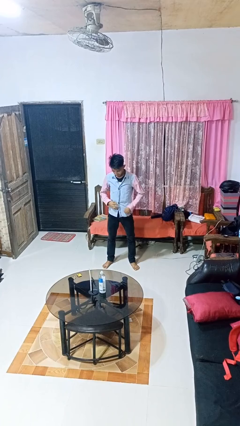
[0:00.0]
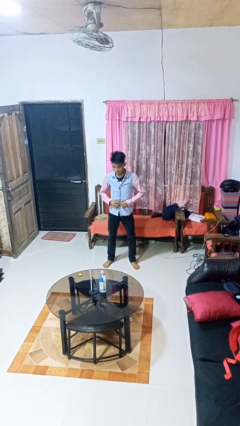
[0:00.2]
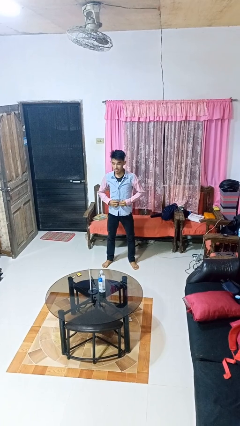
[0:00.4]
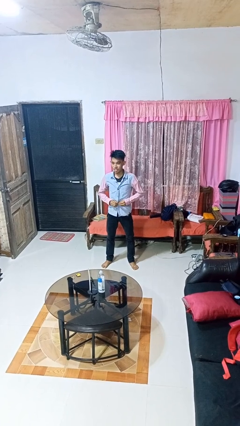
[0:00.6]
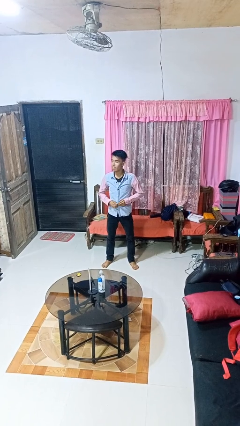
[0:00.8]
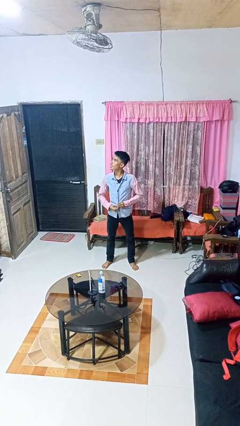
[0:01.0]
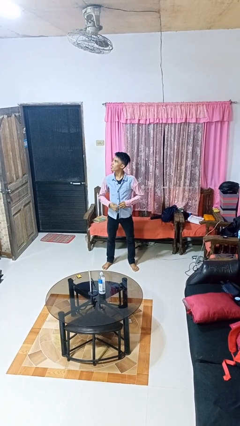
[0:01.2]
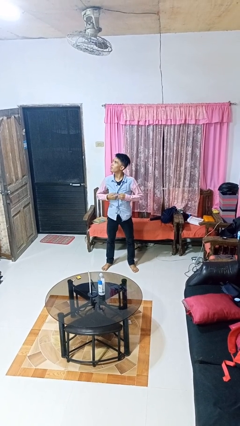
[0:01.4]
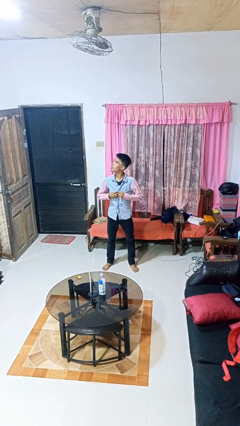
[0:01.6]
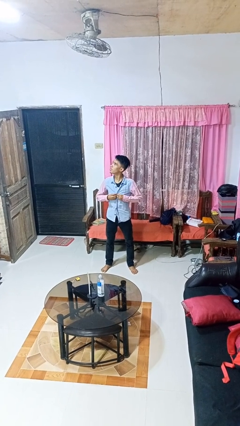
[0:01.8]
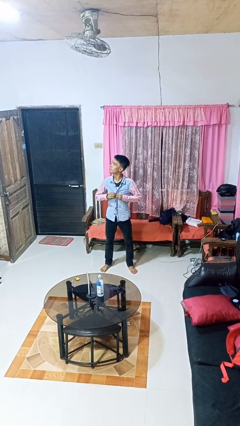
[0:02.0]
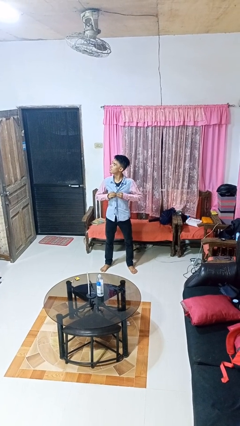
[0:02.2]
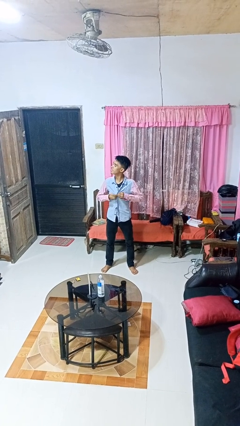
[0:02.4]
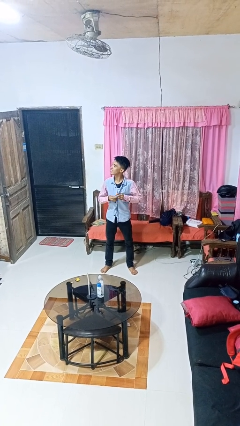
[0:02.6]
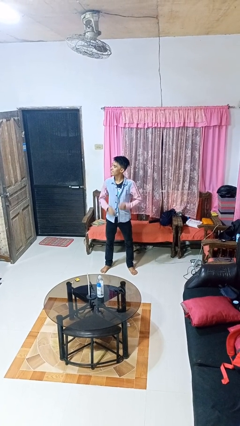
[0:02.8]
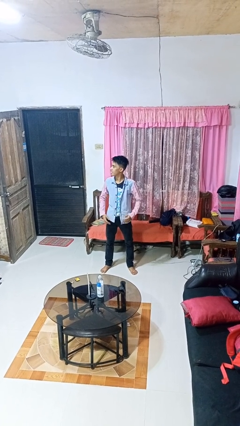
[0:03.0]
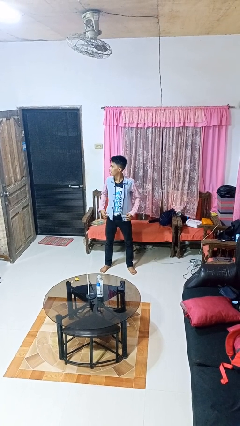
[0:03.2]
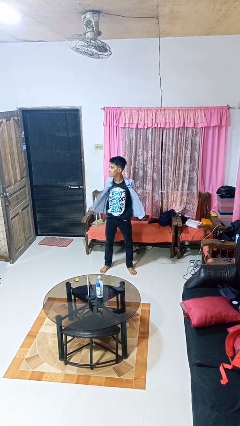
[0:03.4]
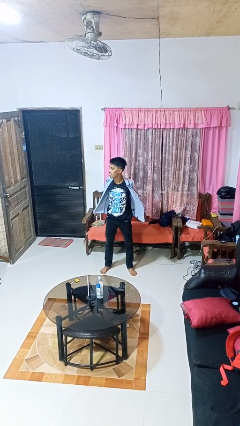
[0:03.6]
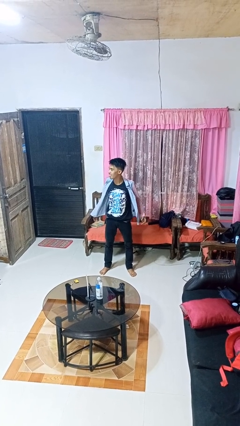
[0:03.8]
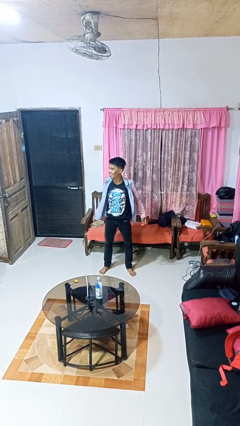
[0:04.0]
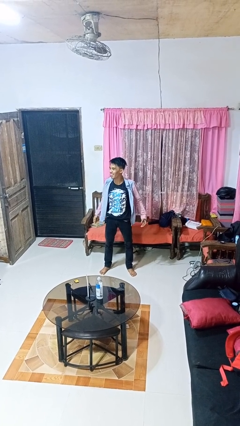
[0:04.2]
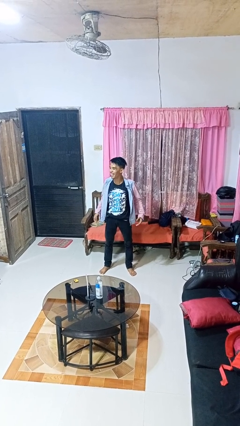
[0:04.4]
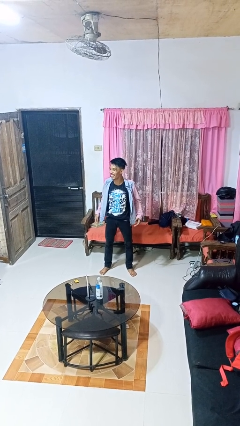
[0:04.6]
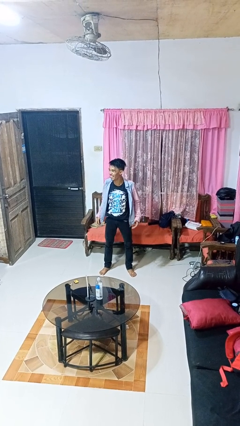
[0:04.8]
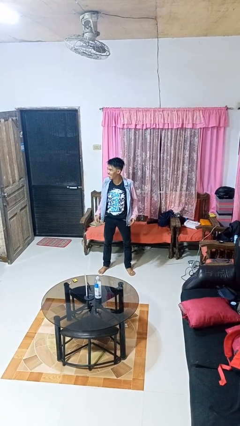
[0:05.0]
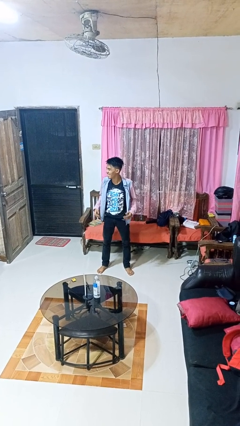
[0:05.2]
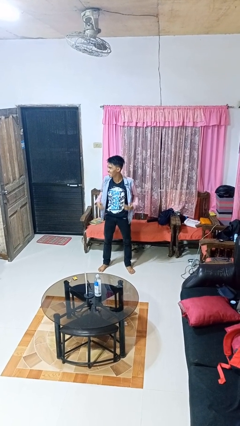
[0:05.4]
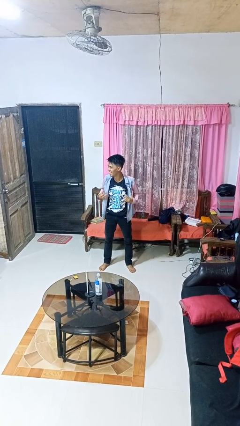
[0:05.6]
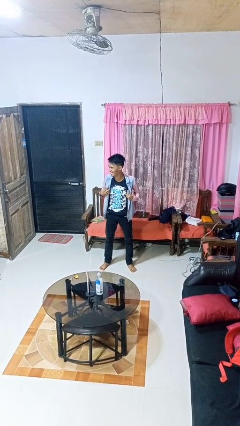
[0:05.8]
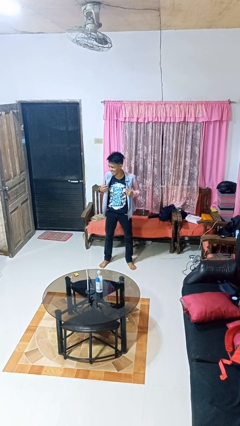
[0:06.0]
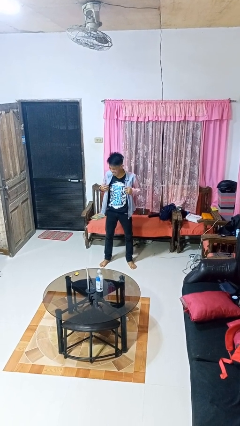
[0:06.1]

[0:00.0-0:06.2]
person unbuttons shirt

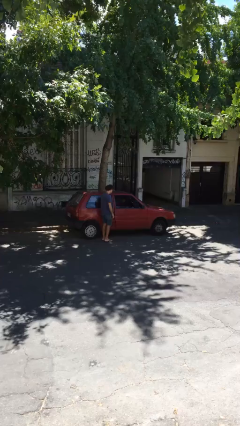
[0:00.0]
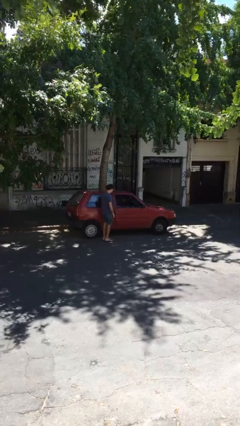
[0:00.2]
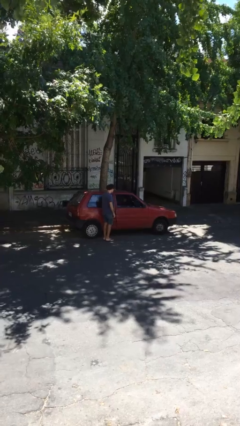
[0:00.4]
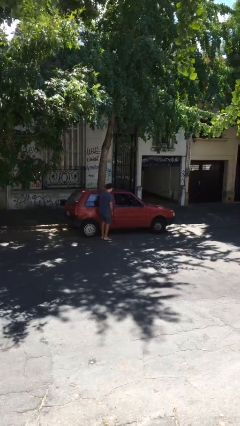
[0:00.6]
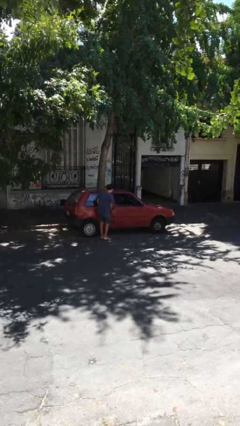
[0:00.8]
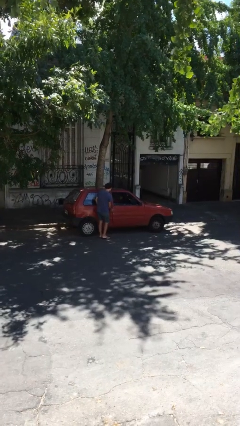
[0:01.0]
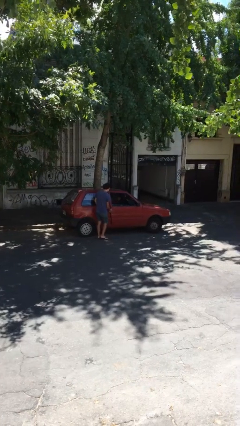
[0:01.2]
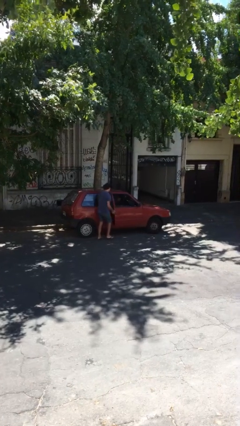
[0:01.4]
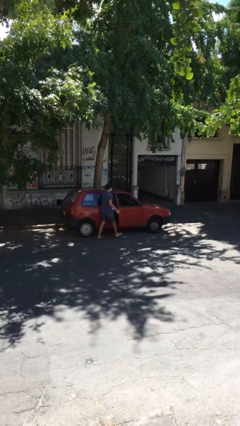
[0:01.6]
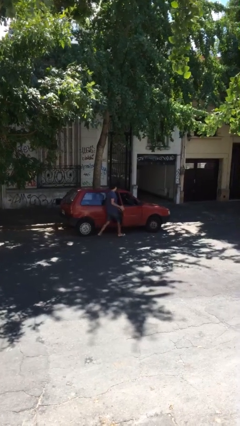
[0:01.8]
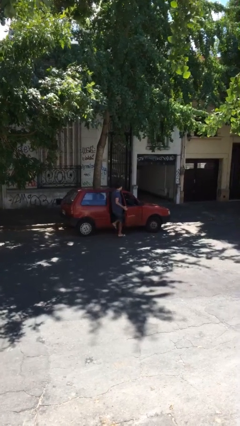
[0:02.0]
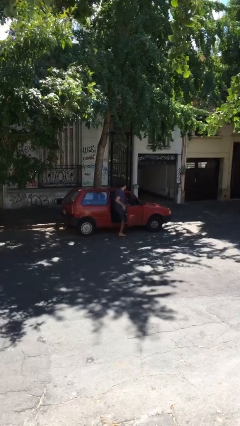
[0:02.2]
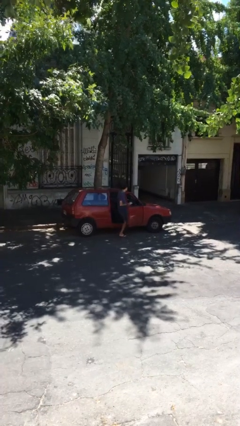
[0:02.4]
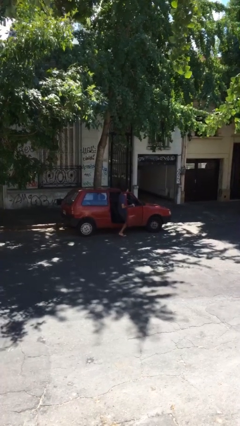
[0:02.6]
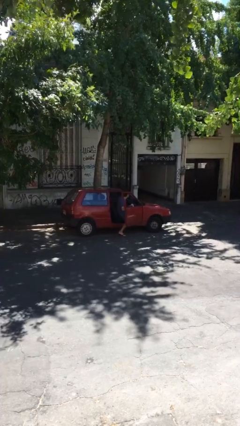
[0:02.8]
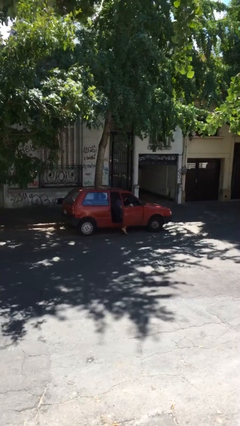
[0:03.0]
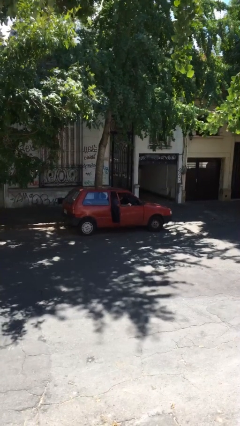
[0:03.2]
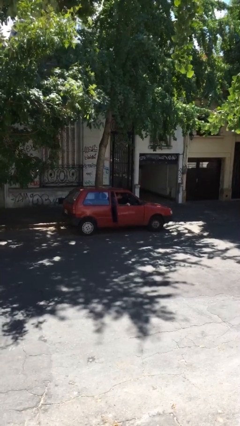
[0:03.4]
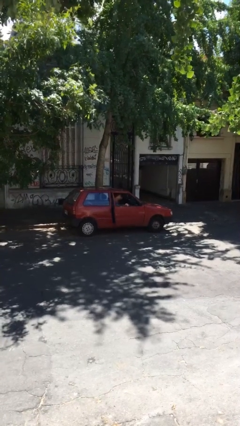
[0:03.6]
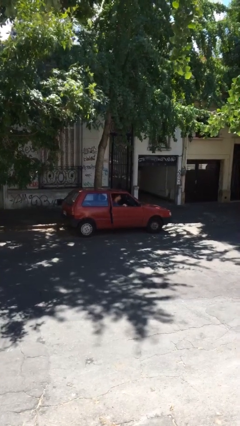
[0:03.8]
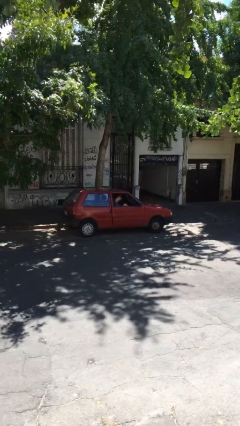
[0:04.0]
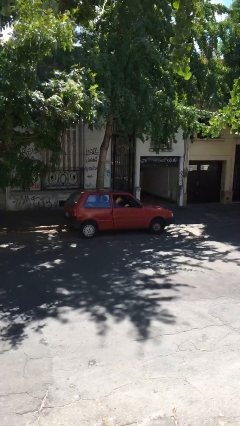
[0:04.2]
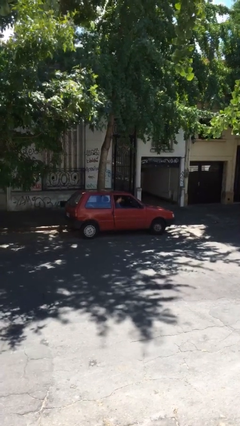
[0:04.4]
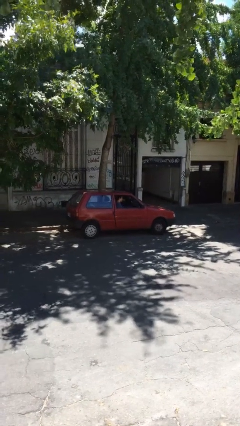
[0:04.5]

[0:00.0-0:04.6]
car picks up person

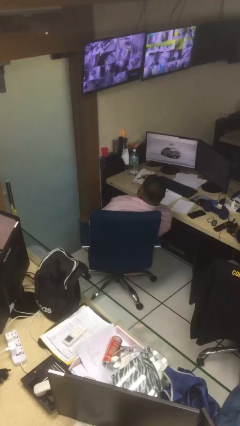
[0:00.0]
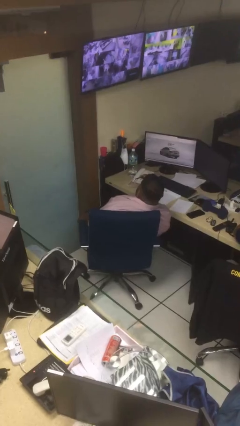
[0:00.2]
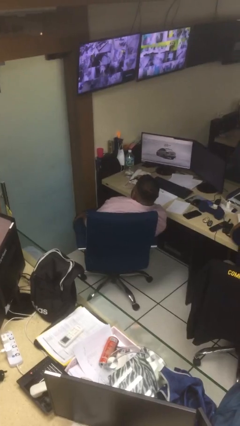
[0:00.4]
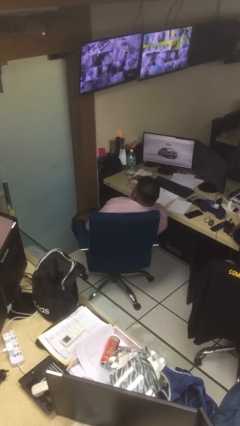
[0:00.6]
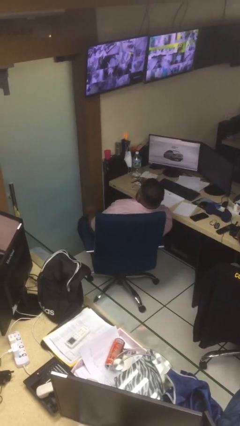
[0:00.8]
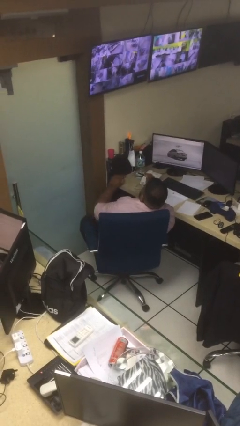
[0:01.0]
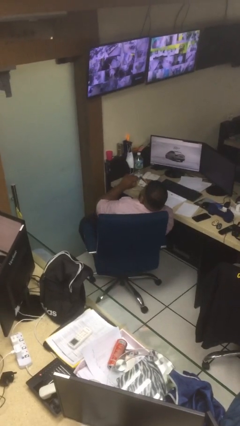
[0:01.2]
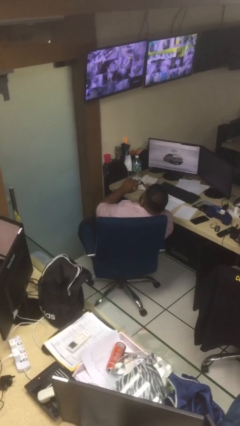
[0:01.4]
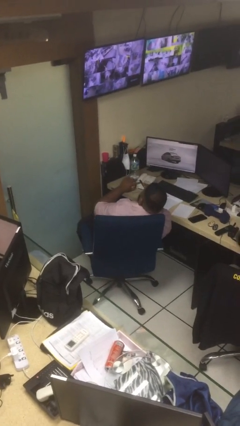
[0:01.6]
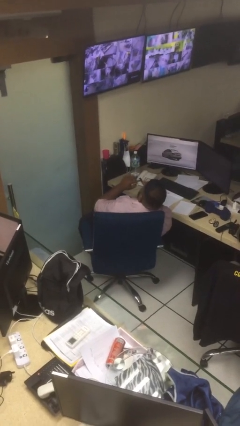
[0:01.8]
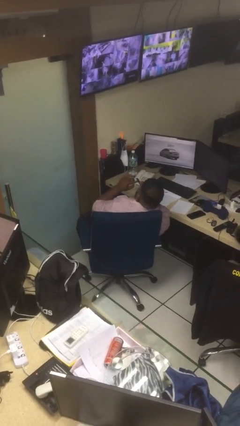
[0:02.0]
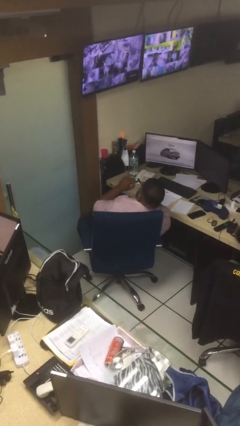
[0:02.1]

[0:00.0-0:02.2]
person files fingernails

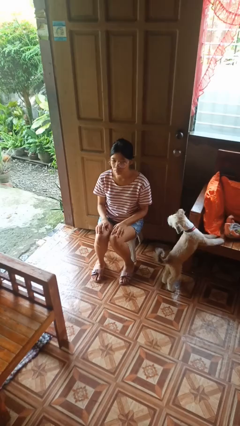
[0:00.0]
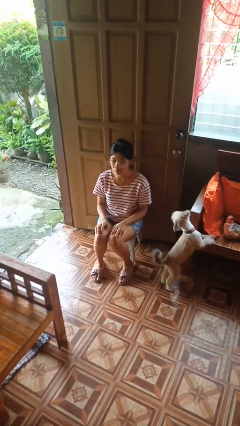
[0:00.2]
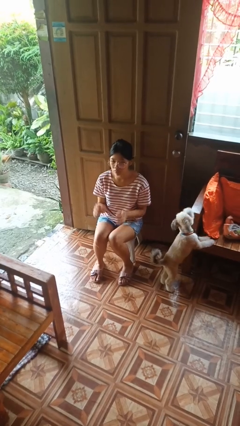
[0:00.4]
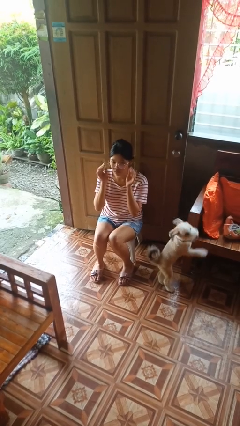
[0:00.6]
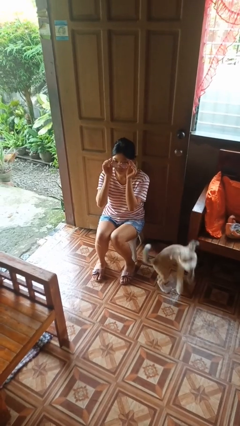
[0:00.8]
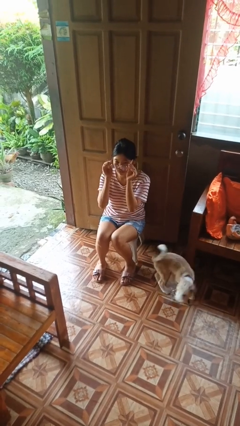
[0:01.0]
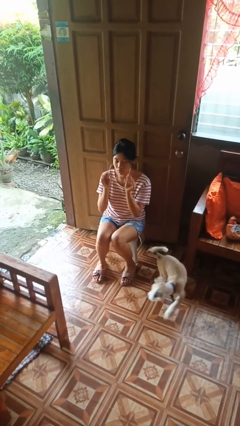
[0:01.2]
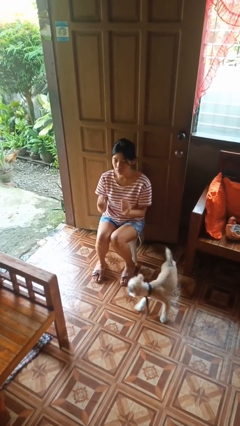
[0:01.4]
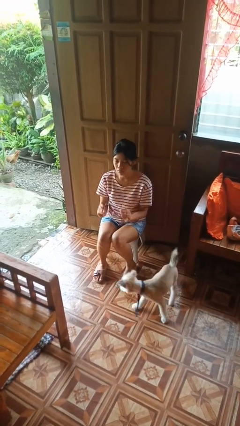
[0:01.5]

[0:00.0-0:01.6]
person takes off glasses

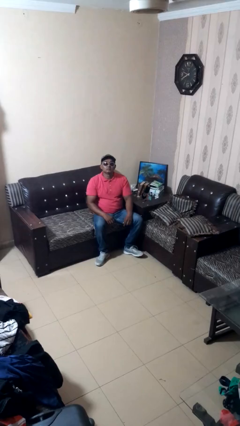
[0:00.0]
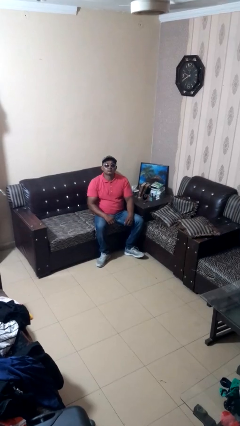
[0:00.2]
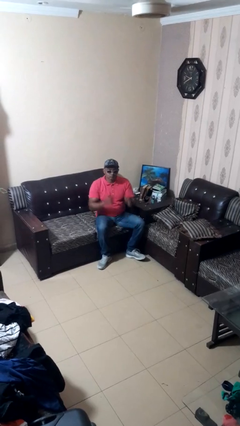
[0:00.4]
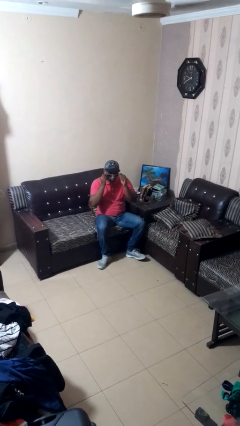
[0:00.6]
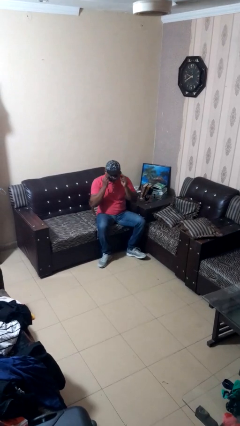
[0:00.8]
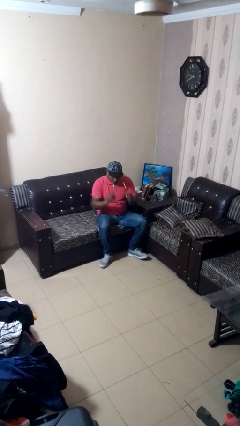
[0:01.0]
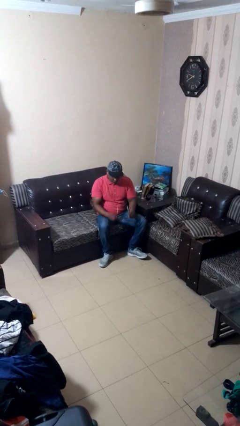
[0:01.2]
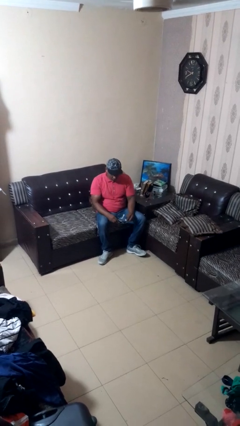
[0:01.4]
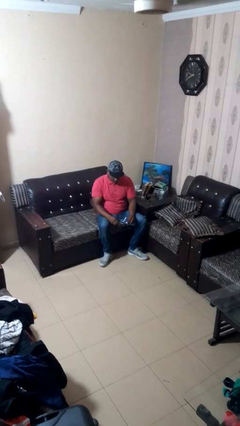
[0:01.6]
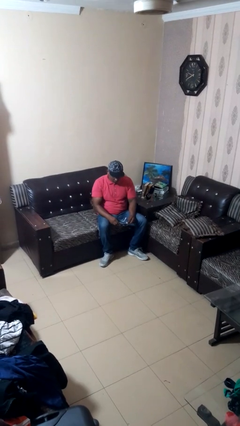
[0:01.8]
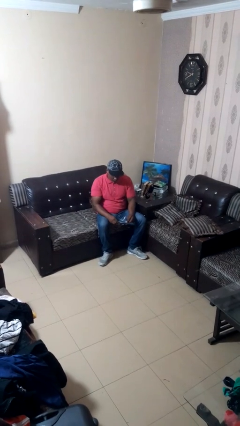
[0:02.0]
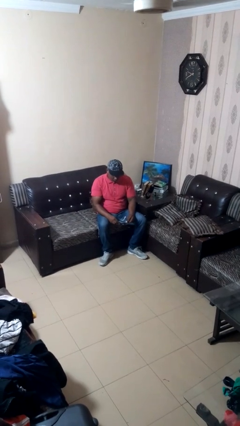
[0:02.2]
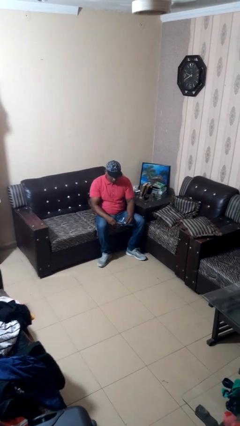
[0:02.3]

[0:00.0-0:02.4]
person takes off sunglasses

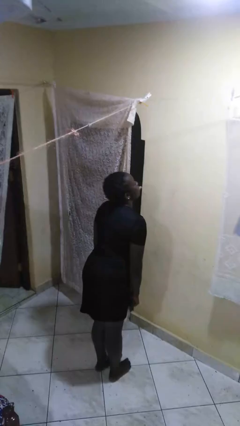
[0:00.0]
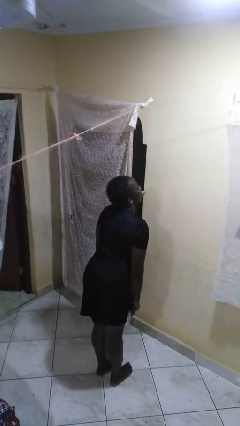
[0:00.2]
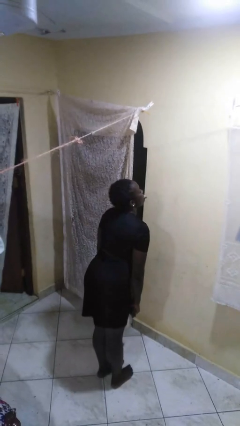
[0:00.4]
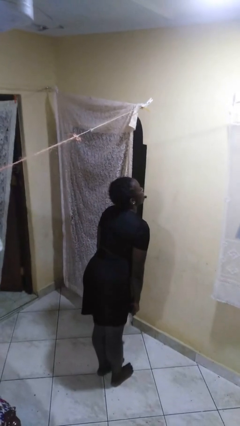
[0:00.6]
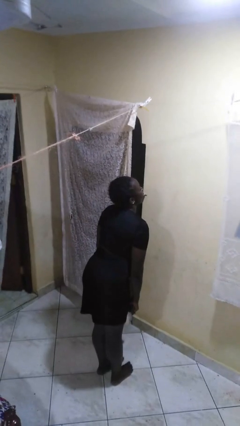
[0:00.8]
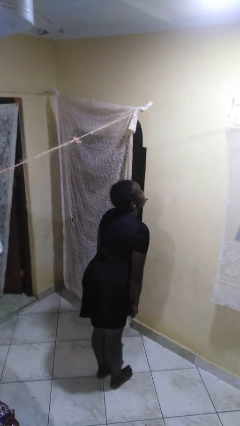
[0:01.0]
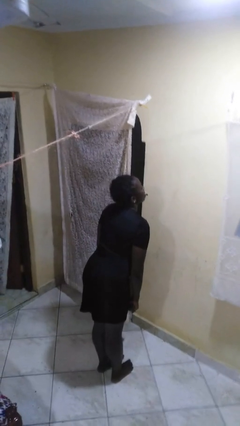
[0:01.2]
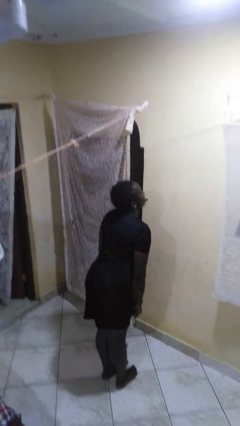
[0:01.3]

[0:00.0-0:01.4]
person sticks out tongue
